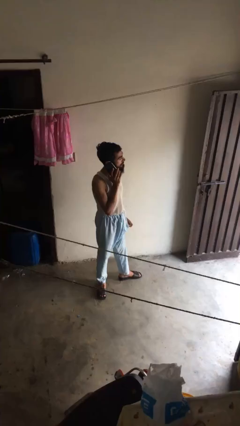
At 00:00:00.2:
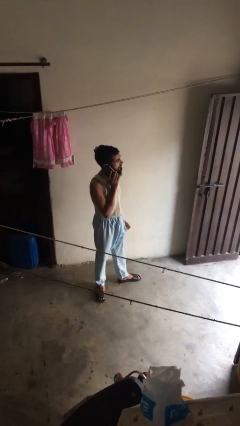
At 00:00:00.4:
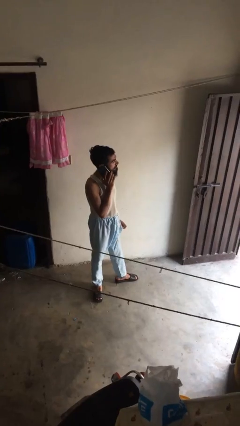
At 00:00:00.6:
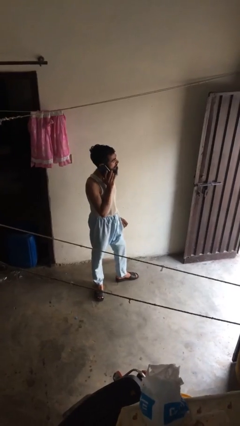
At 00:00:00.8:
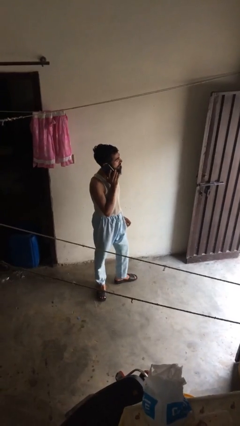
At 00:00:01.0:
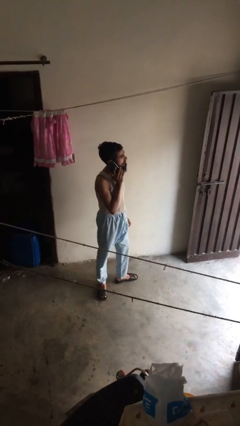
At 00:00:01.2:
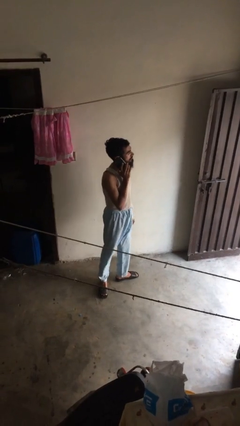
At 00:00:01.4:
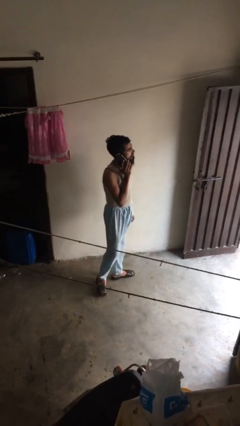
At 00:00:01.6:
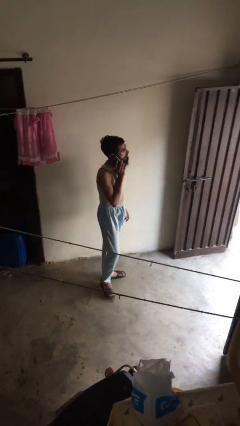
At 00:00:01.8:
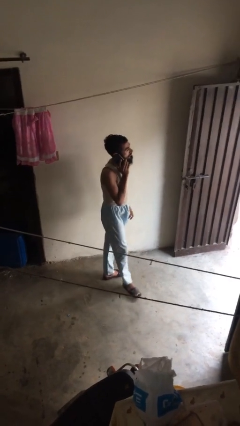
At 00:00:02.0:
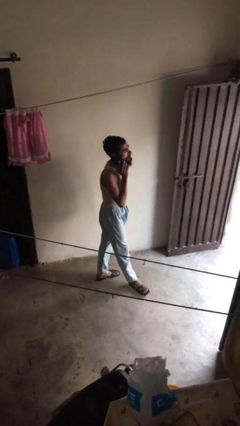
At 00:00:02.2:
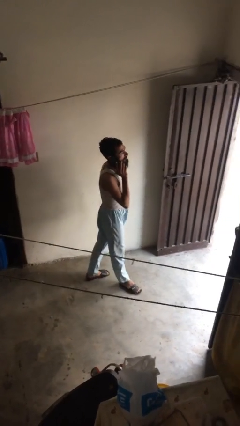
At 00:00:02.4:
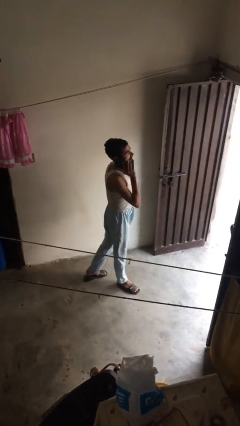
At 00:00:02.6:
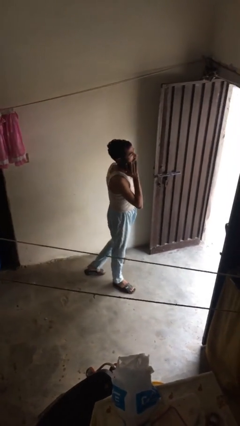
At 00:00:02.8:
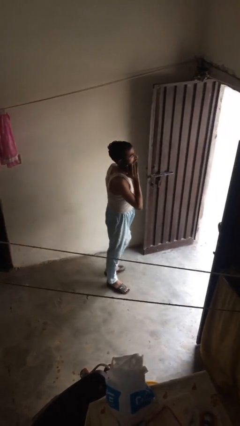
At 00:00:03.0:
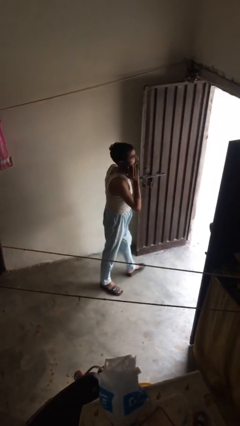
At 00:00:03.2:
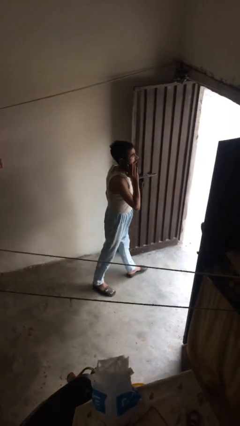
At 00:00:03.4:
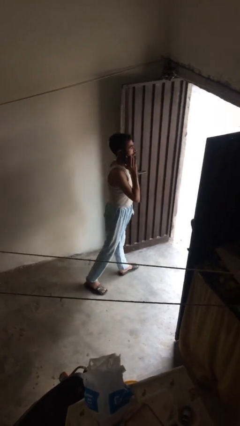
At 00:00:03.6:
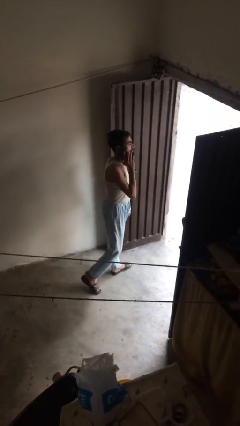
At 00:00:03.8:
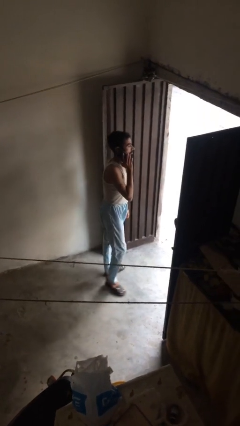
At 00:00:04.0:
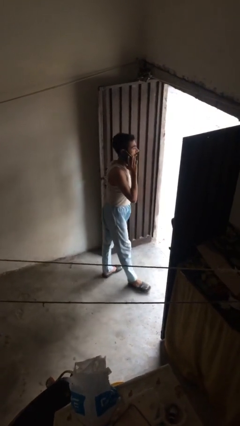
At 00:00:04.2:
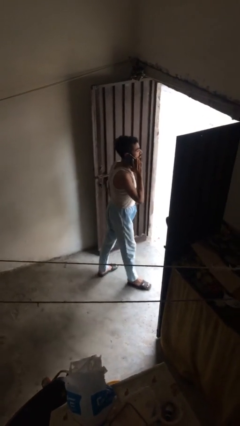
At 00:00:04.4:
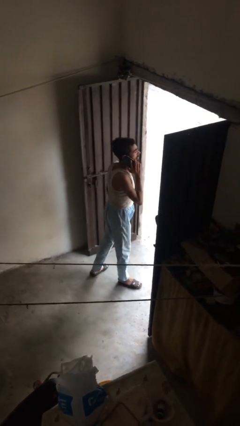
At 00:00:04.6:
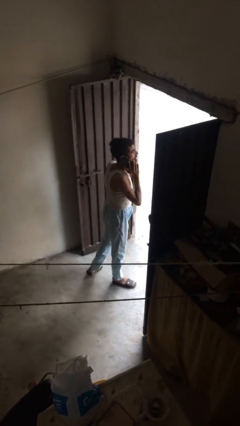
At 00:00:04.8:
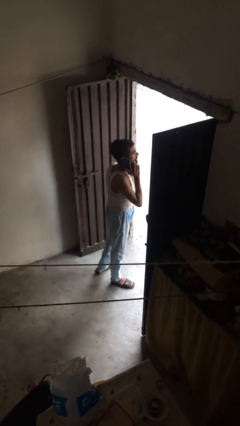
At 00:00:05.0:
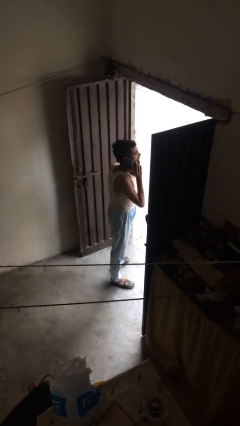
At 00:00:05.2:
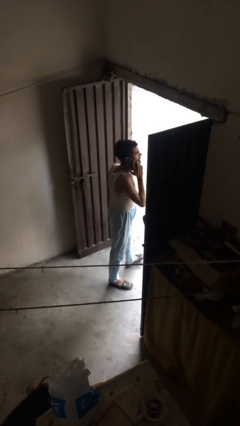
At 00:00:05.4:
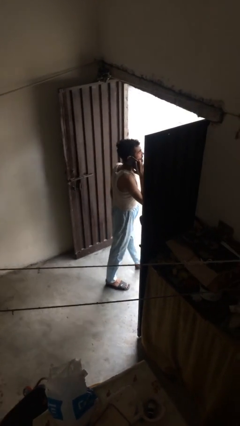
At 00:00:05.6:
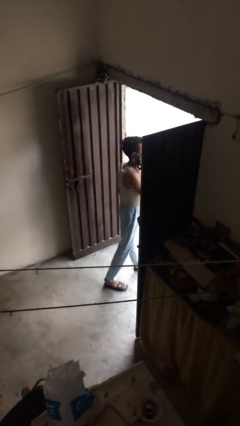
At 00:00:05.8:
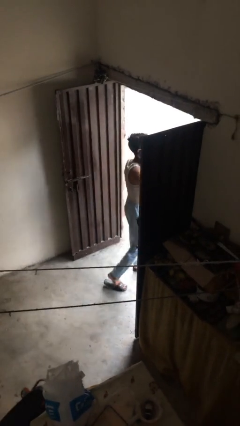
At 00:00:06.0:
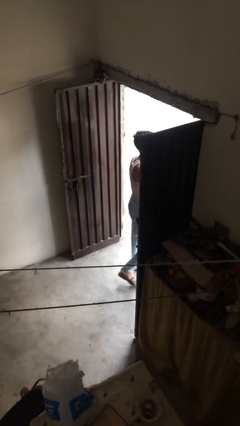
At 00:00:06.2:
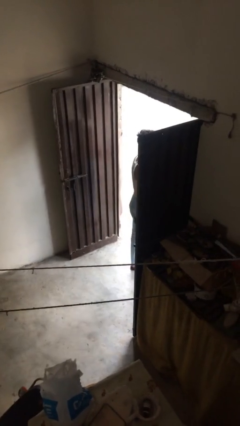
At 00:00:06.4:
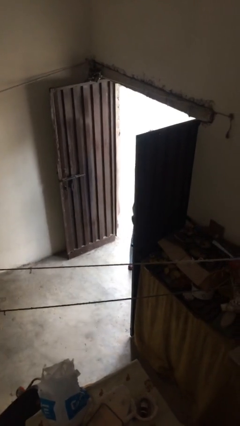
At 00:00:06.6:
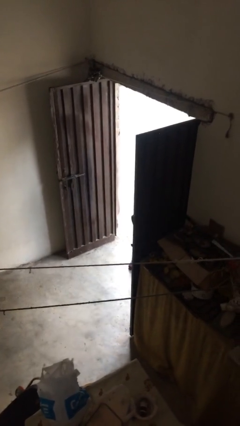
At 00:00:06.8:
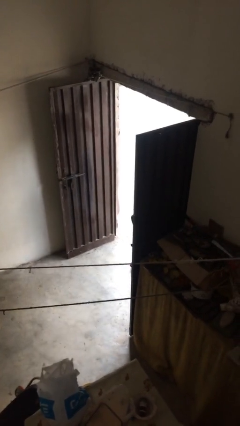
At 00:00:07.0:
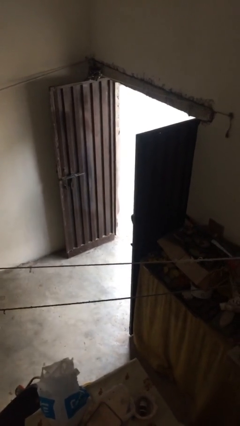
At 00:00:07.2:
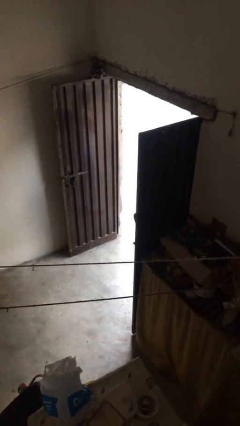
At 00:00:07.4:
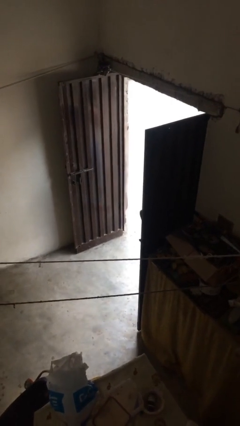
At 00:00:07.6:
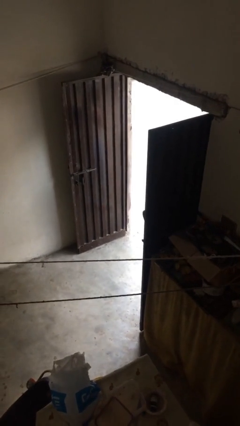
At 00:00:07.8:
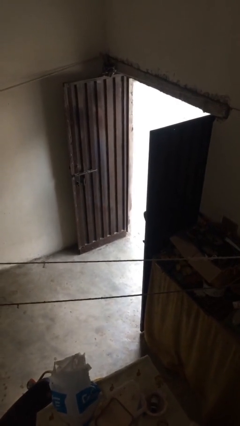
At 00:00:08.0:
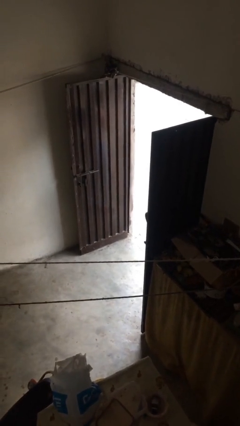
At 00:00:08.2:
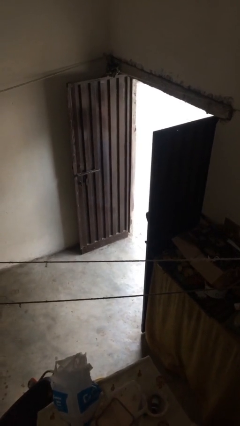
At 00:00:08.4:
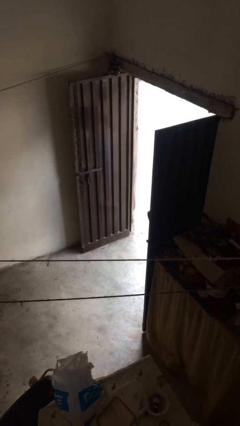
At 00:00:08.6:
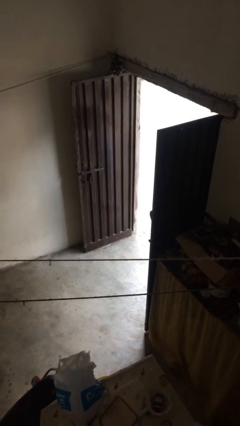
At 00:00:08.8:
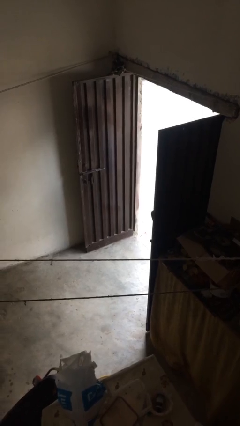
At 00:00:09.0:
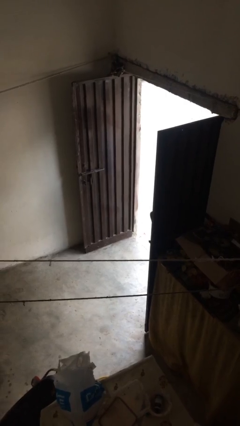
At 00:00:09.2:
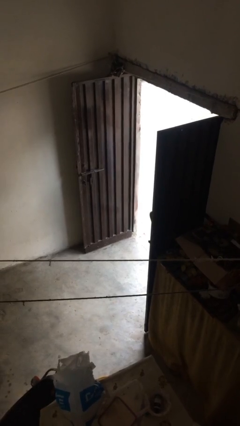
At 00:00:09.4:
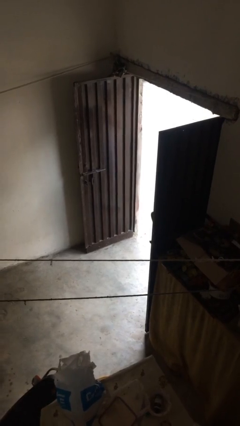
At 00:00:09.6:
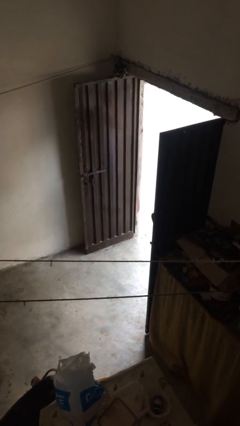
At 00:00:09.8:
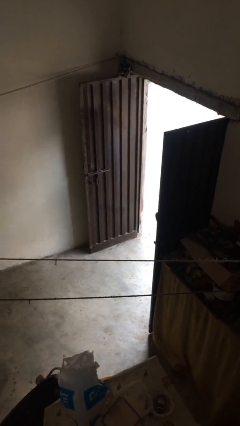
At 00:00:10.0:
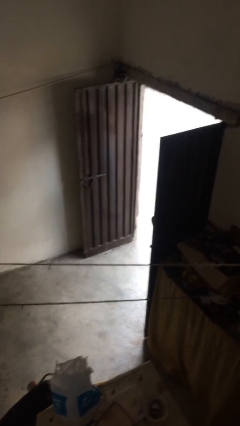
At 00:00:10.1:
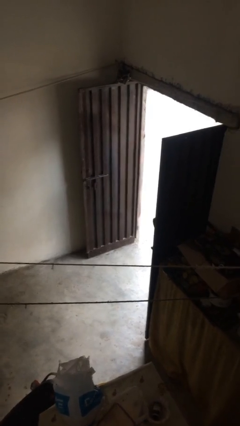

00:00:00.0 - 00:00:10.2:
person exits scene through structure

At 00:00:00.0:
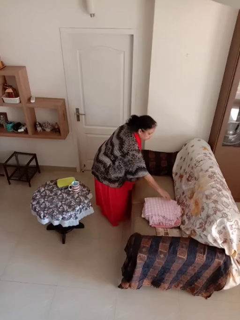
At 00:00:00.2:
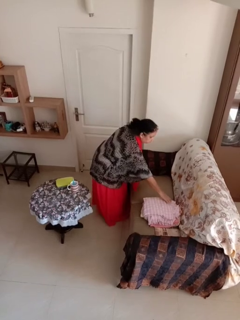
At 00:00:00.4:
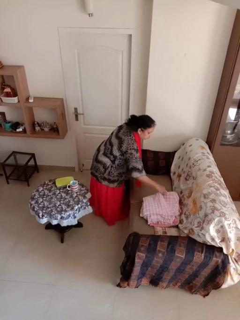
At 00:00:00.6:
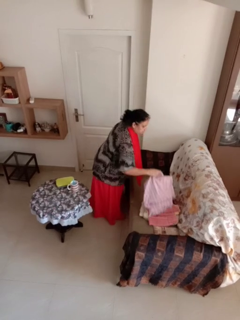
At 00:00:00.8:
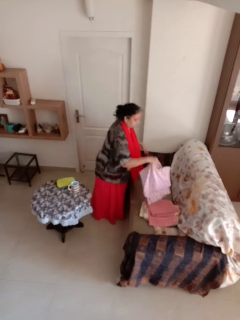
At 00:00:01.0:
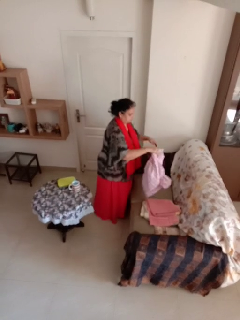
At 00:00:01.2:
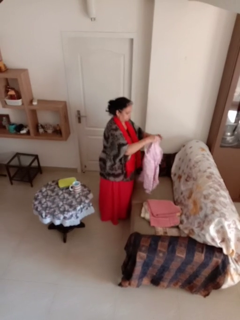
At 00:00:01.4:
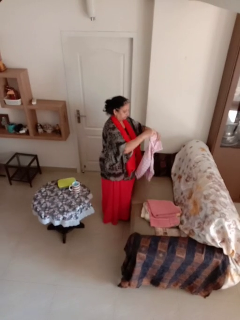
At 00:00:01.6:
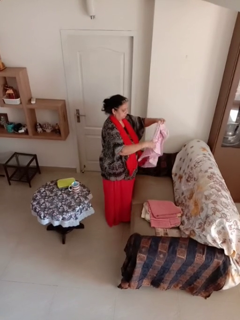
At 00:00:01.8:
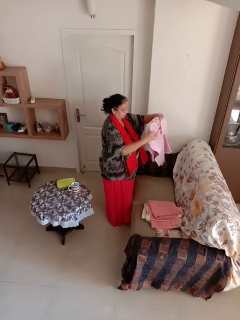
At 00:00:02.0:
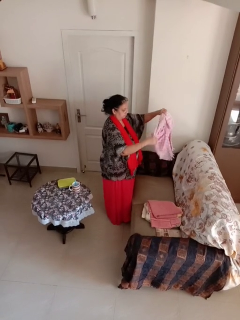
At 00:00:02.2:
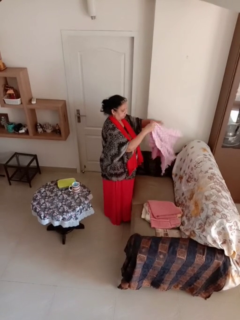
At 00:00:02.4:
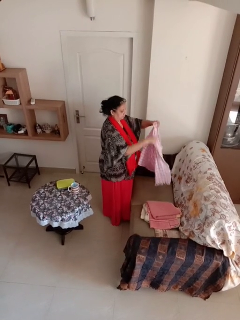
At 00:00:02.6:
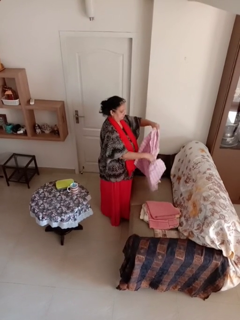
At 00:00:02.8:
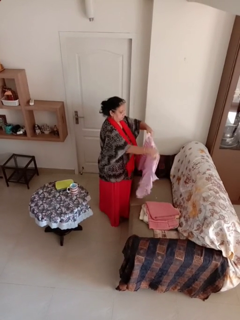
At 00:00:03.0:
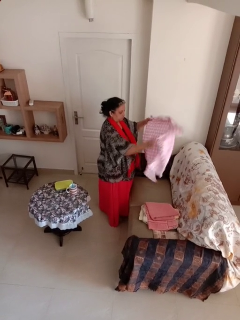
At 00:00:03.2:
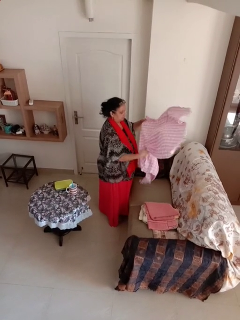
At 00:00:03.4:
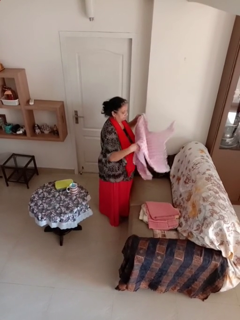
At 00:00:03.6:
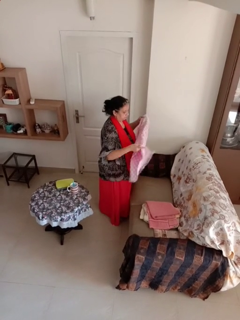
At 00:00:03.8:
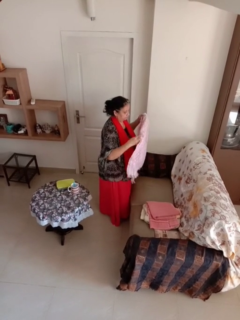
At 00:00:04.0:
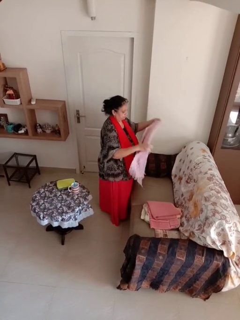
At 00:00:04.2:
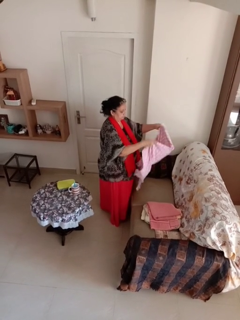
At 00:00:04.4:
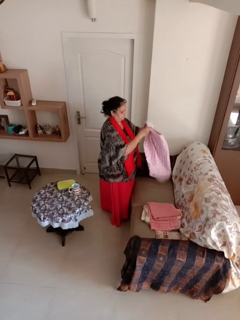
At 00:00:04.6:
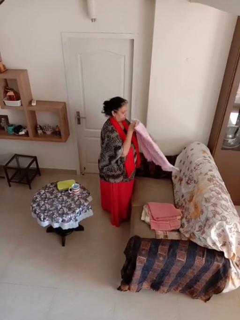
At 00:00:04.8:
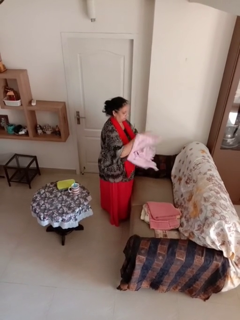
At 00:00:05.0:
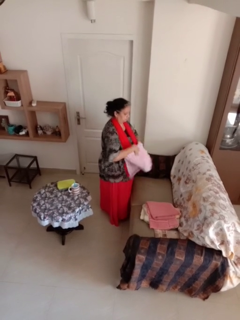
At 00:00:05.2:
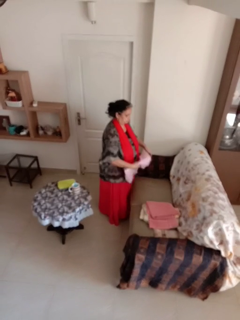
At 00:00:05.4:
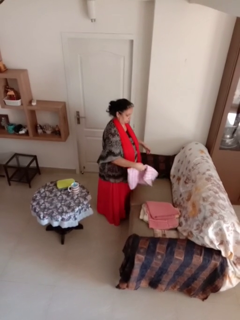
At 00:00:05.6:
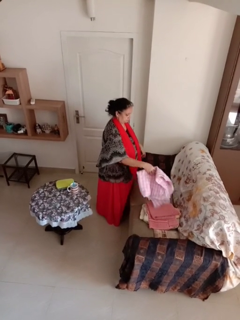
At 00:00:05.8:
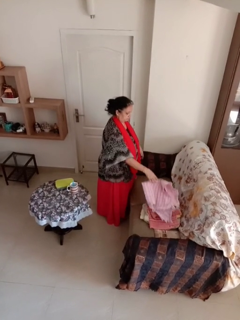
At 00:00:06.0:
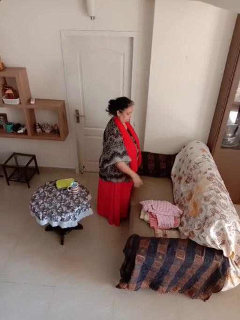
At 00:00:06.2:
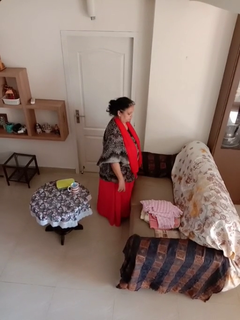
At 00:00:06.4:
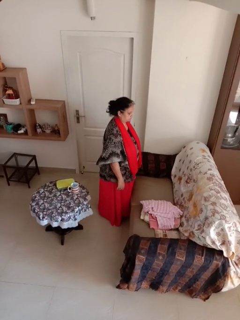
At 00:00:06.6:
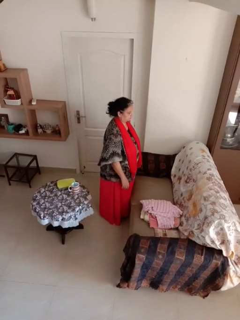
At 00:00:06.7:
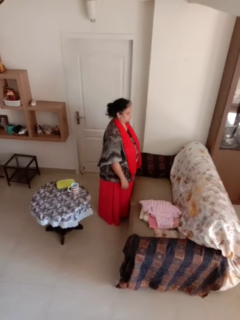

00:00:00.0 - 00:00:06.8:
person folds towel

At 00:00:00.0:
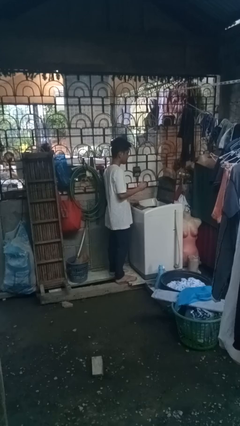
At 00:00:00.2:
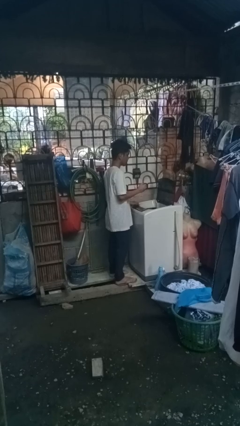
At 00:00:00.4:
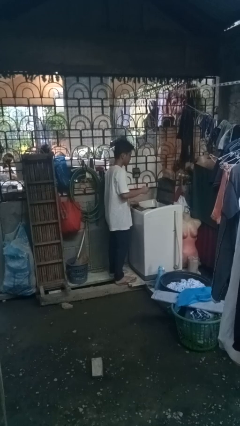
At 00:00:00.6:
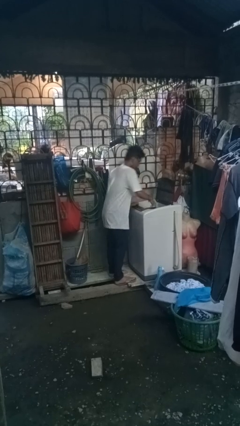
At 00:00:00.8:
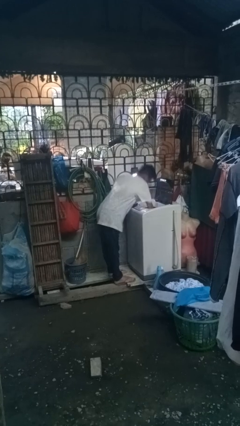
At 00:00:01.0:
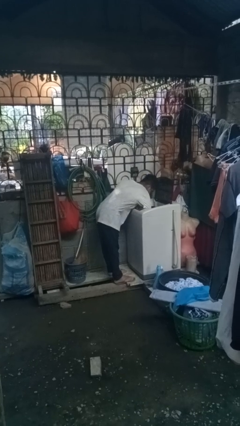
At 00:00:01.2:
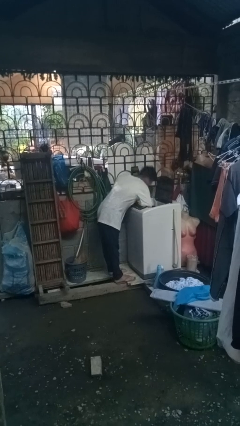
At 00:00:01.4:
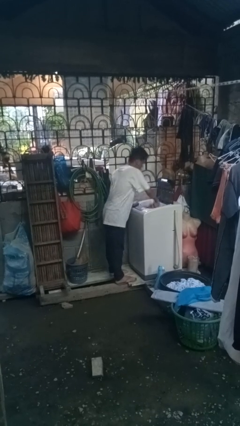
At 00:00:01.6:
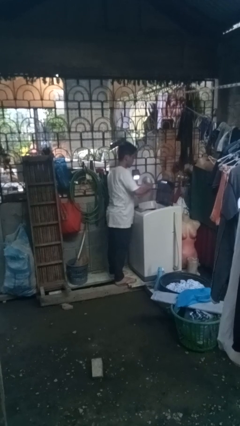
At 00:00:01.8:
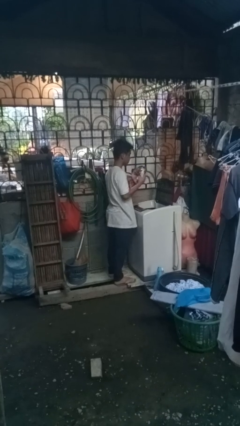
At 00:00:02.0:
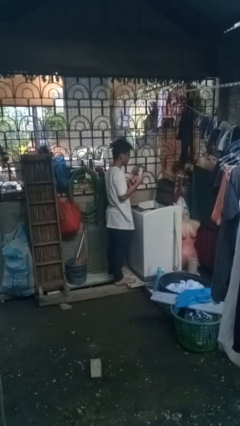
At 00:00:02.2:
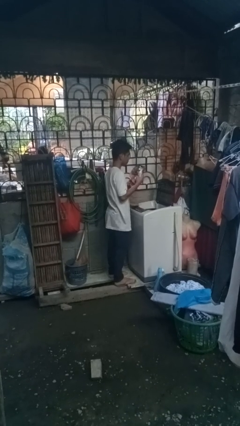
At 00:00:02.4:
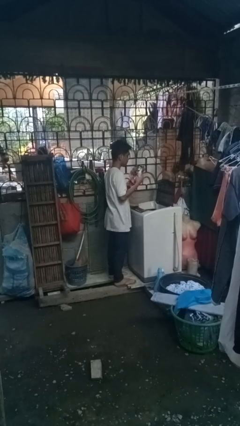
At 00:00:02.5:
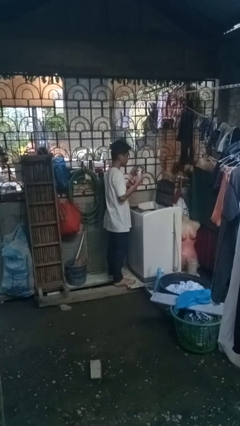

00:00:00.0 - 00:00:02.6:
person unloads clotheswasher
